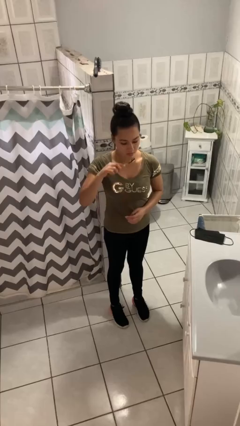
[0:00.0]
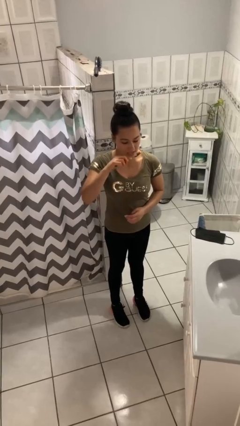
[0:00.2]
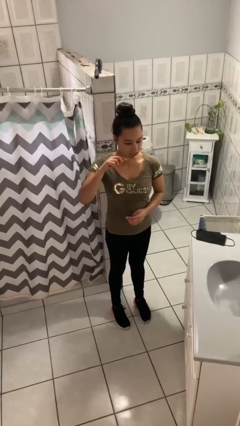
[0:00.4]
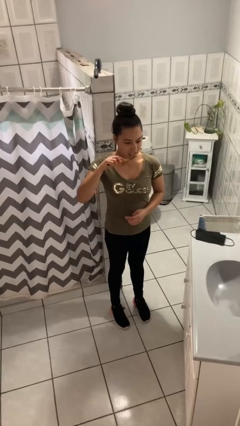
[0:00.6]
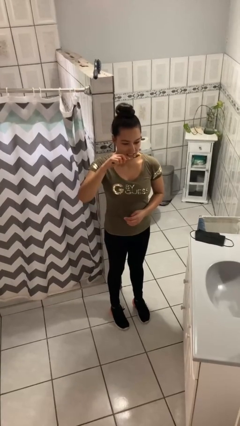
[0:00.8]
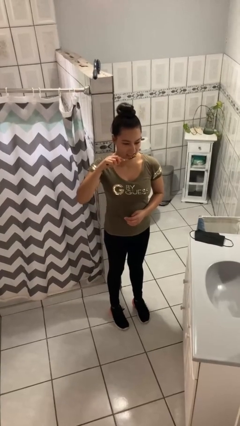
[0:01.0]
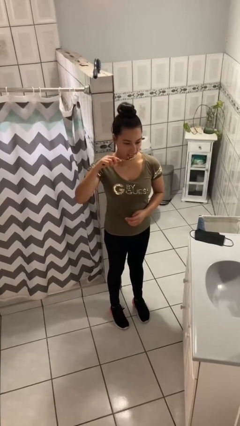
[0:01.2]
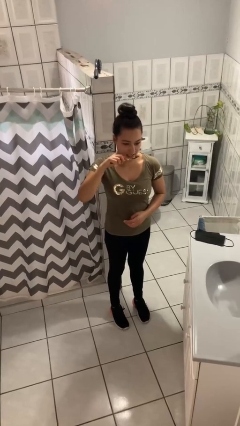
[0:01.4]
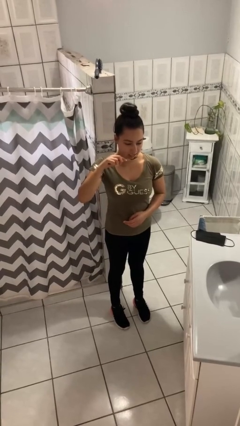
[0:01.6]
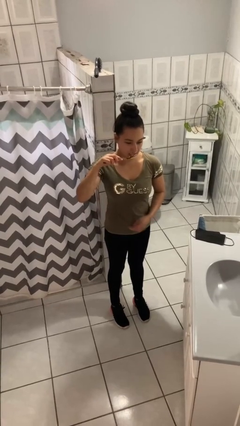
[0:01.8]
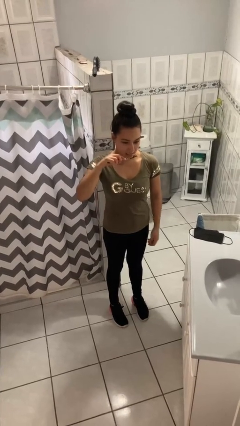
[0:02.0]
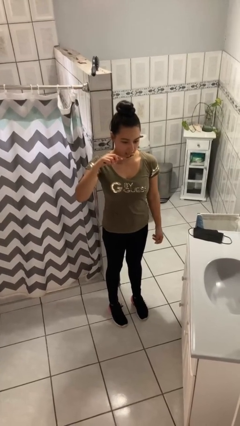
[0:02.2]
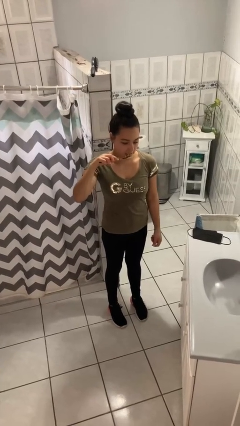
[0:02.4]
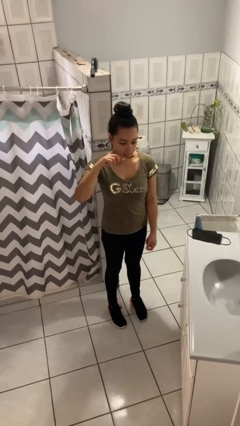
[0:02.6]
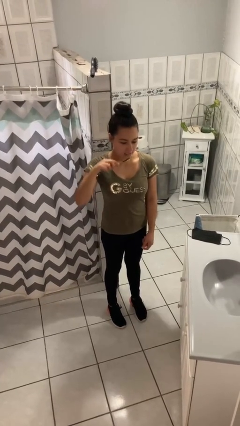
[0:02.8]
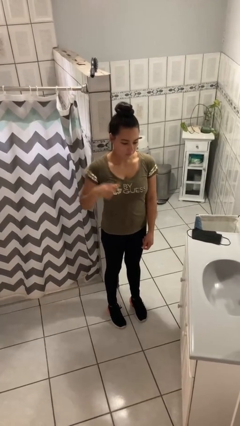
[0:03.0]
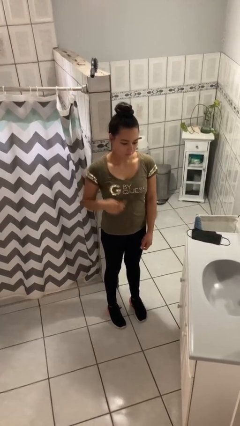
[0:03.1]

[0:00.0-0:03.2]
person brushes teeth

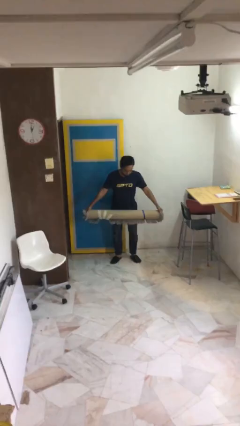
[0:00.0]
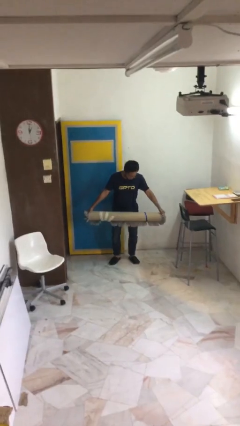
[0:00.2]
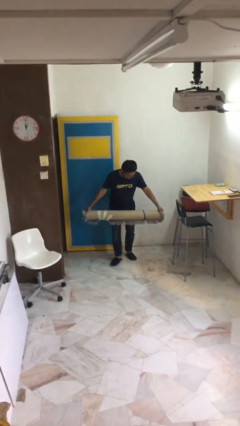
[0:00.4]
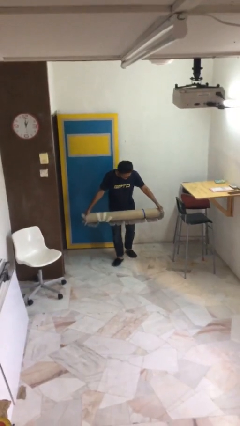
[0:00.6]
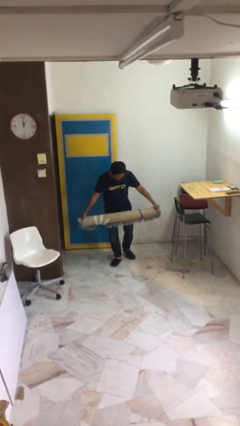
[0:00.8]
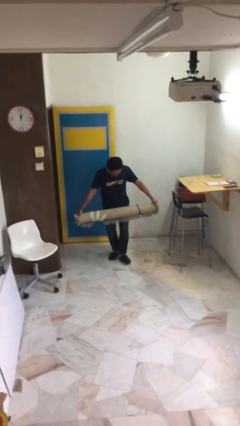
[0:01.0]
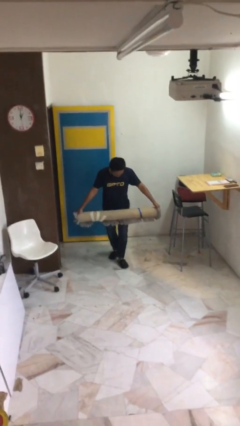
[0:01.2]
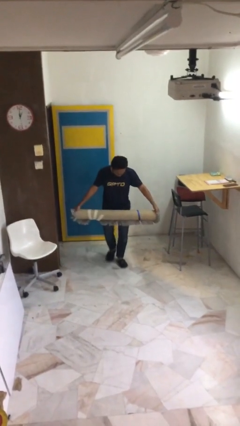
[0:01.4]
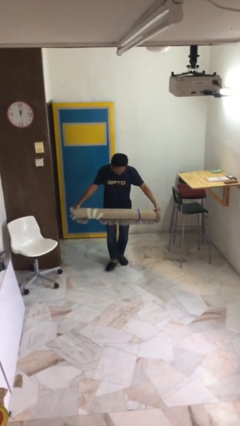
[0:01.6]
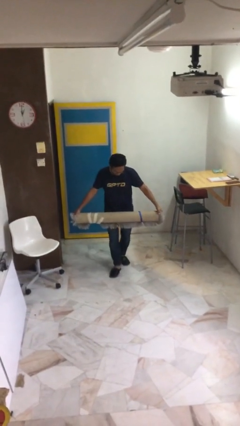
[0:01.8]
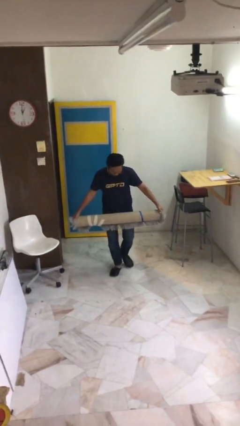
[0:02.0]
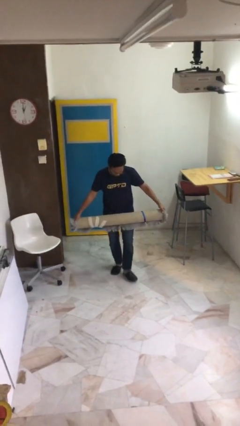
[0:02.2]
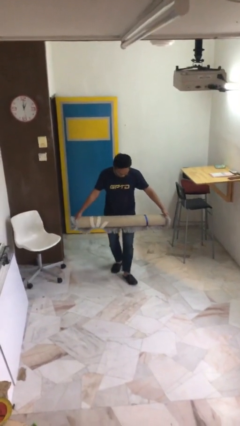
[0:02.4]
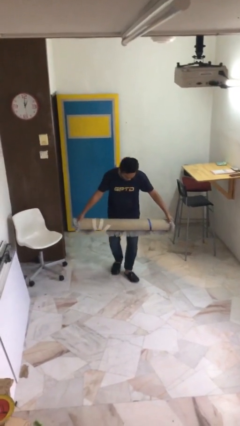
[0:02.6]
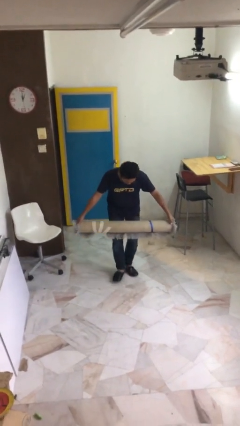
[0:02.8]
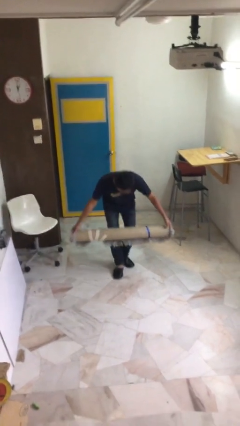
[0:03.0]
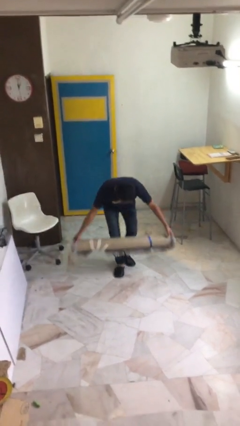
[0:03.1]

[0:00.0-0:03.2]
person carries heavy object

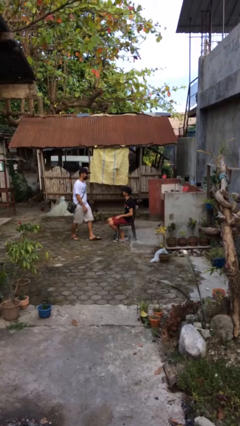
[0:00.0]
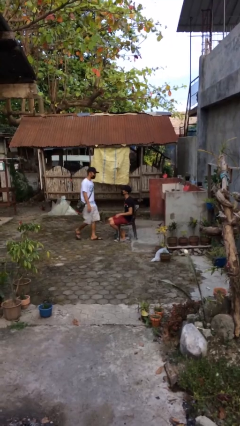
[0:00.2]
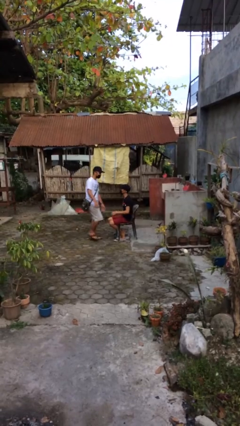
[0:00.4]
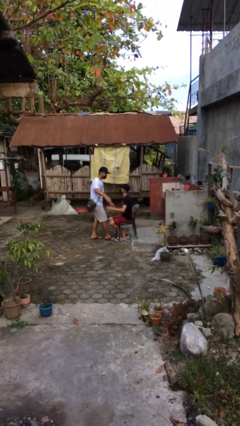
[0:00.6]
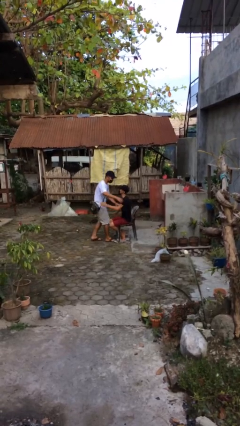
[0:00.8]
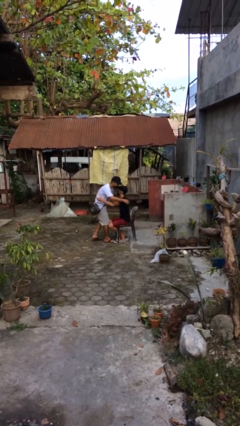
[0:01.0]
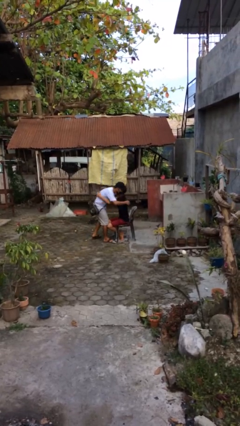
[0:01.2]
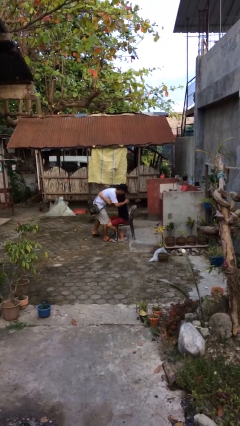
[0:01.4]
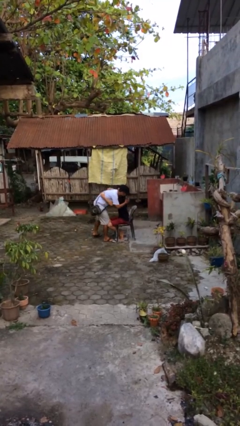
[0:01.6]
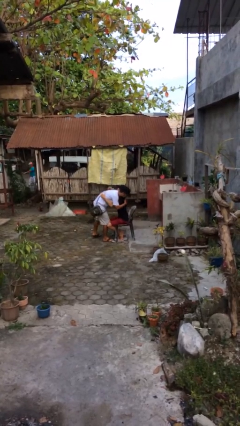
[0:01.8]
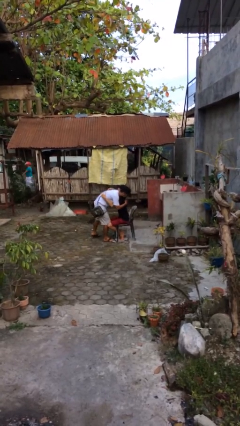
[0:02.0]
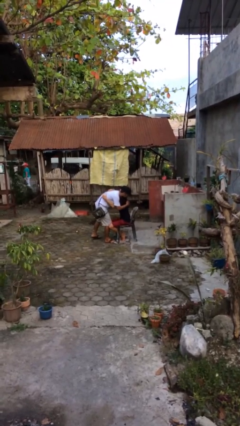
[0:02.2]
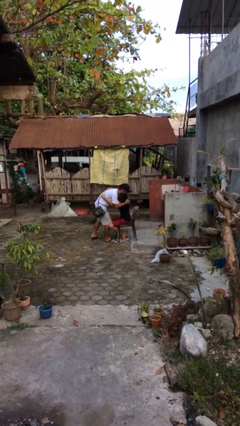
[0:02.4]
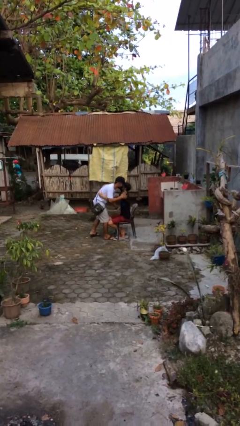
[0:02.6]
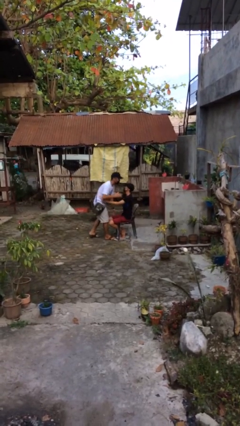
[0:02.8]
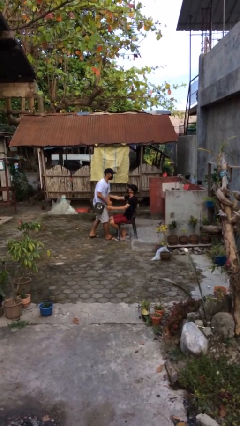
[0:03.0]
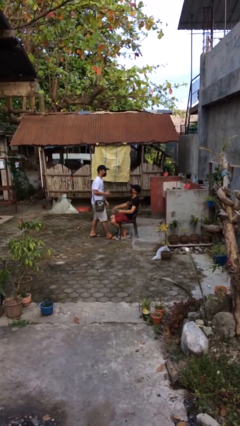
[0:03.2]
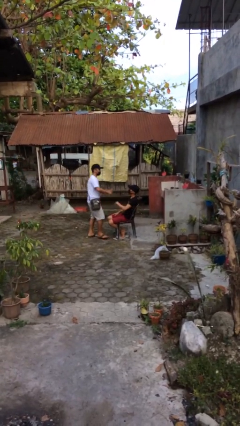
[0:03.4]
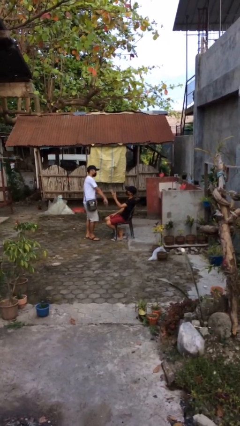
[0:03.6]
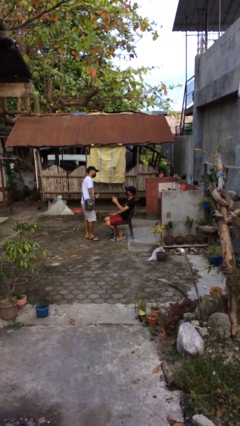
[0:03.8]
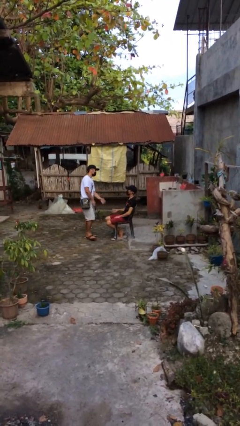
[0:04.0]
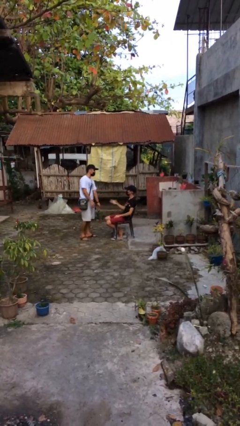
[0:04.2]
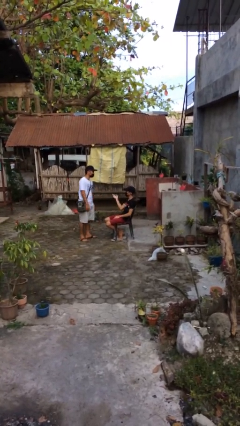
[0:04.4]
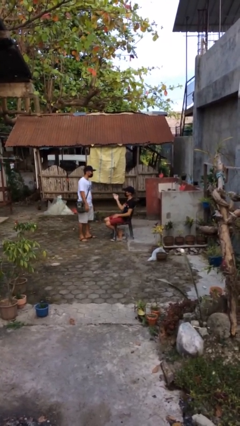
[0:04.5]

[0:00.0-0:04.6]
person embraces person

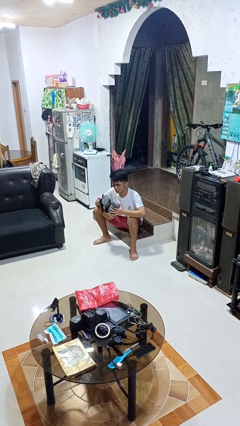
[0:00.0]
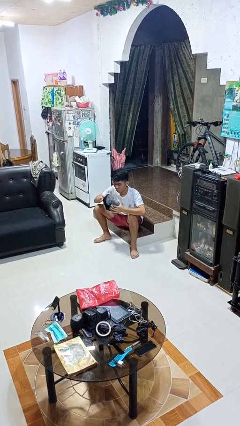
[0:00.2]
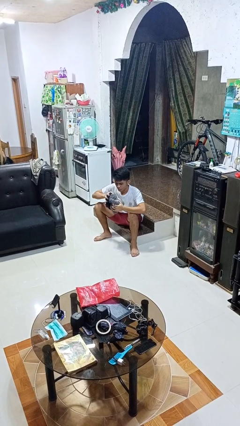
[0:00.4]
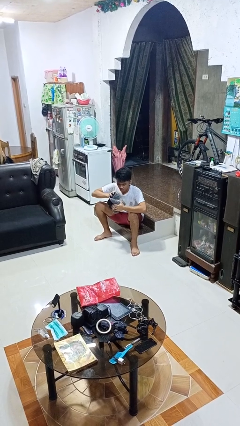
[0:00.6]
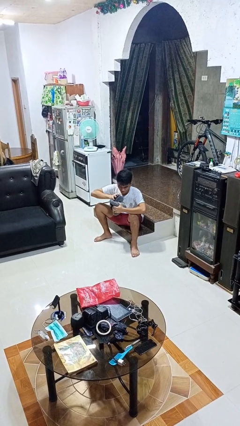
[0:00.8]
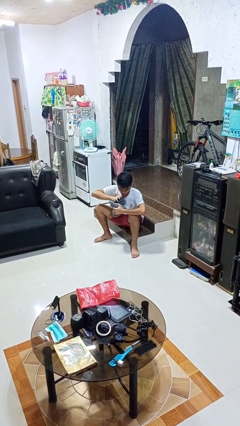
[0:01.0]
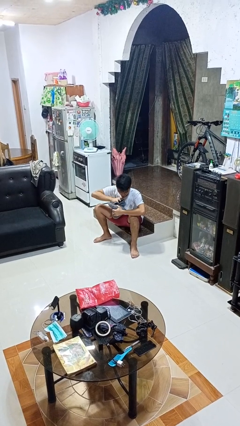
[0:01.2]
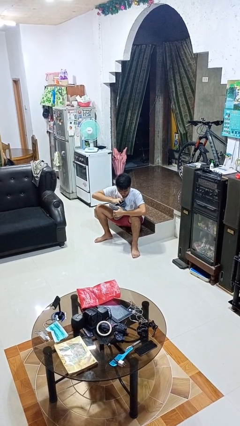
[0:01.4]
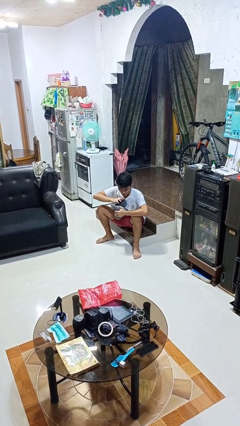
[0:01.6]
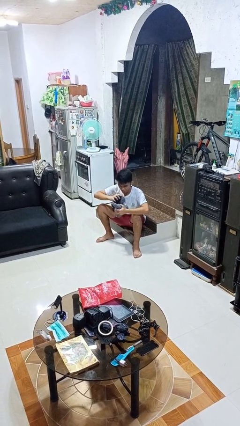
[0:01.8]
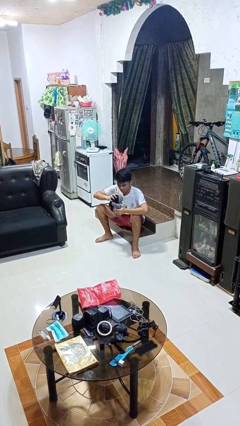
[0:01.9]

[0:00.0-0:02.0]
person squeezes object

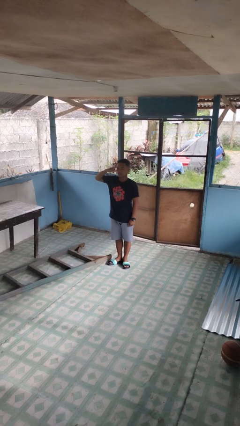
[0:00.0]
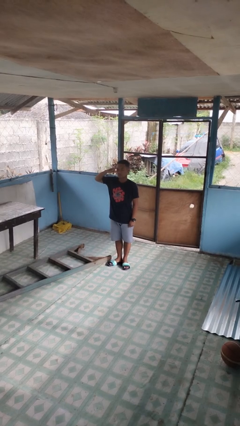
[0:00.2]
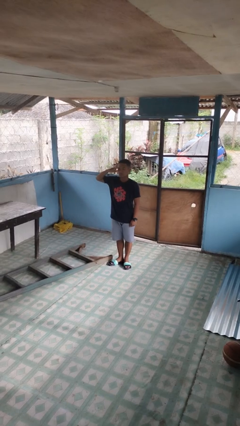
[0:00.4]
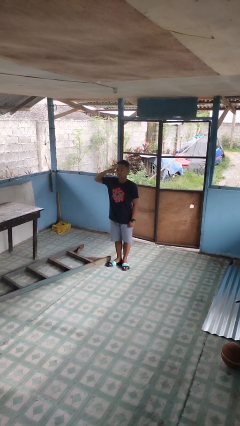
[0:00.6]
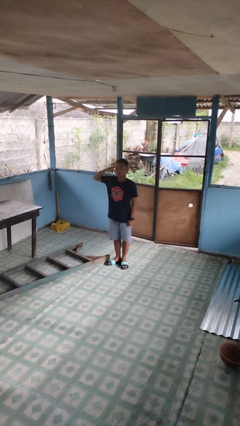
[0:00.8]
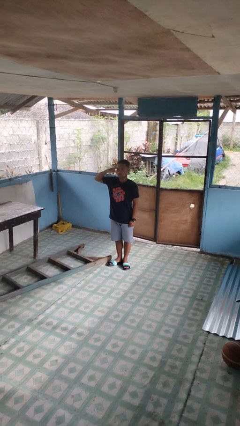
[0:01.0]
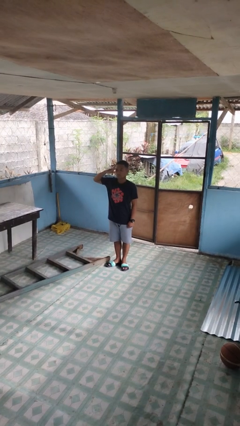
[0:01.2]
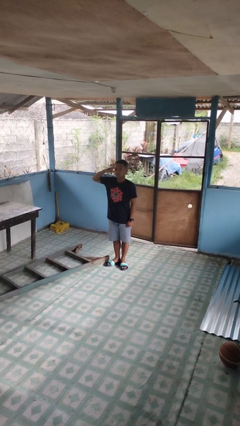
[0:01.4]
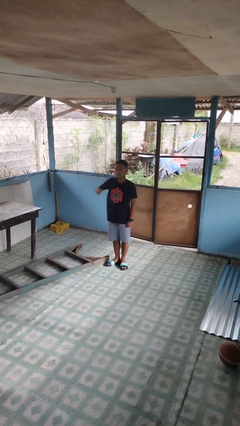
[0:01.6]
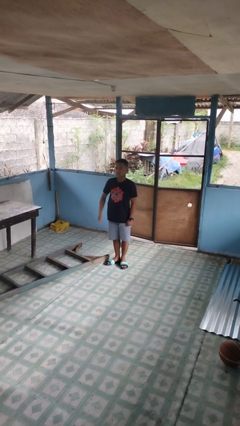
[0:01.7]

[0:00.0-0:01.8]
person salutes

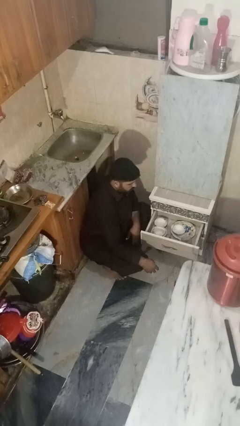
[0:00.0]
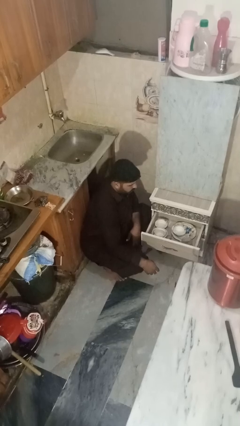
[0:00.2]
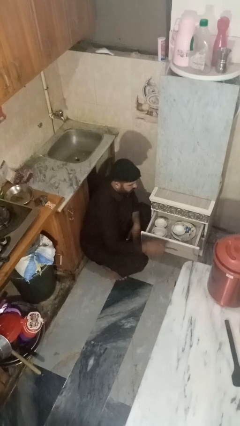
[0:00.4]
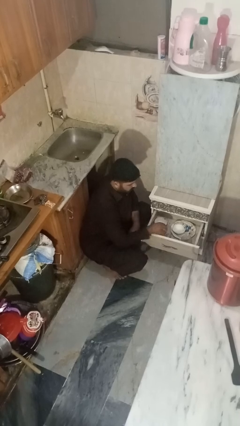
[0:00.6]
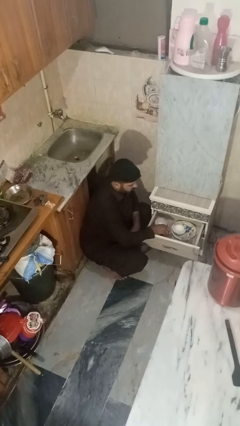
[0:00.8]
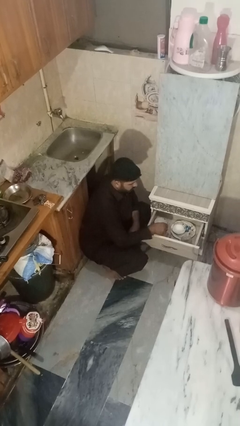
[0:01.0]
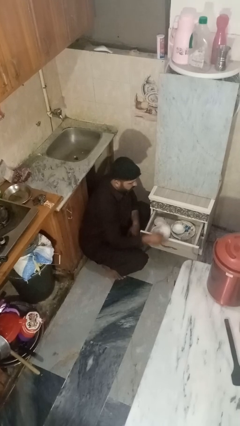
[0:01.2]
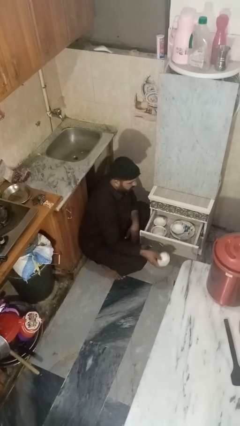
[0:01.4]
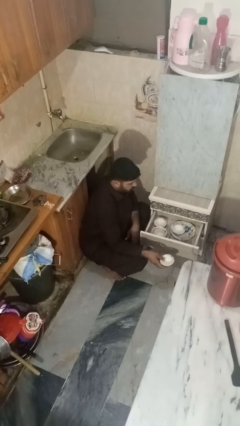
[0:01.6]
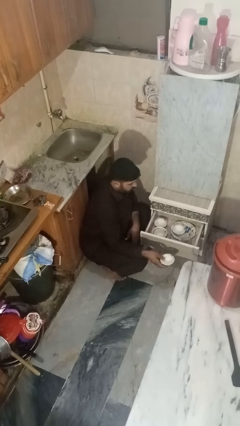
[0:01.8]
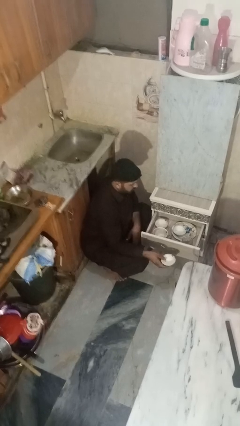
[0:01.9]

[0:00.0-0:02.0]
person takes object from kitchen drawer

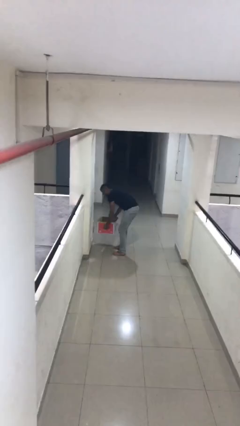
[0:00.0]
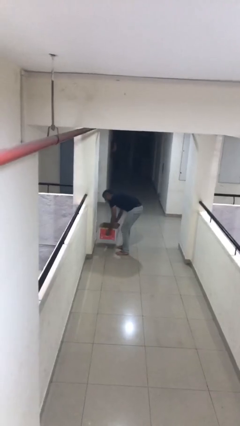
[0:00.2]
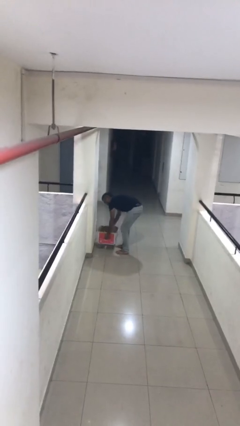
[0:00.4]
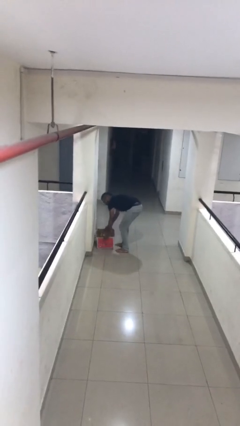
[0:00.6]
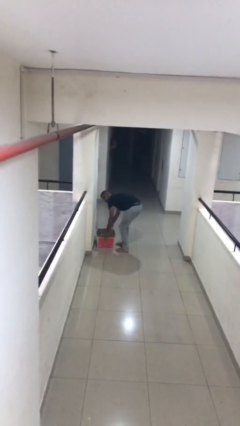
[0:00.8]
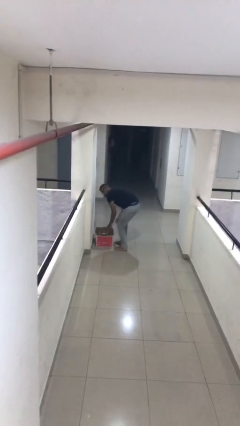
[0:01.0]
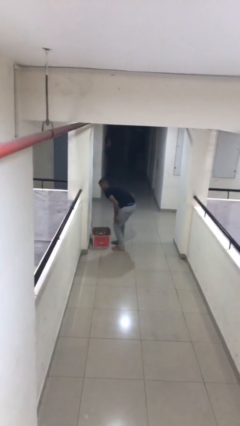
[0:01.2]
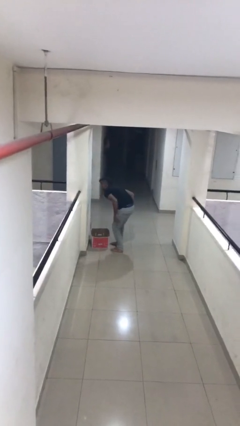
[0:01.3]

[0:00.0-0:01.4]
person puts down object on floor
